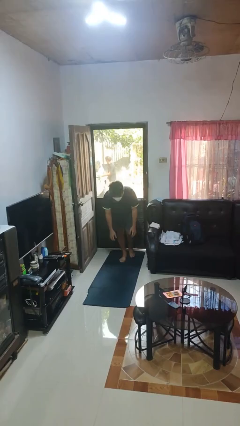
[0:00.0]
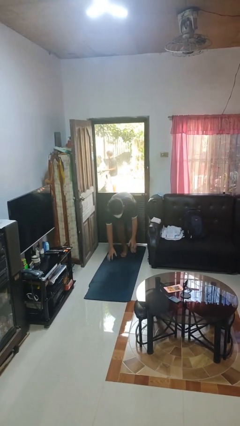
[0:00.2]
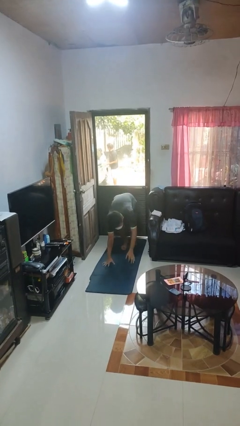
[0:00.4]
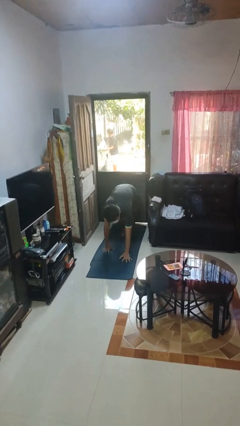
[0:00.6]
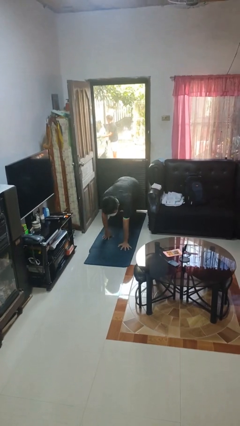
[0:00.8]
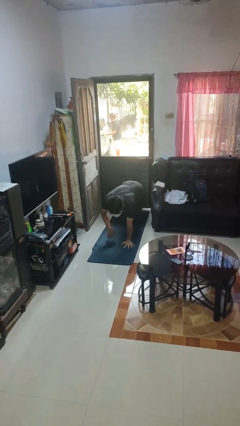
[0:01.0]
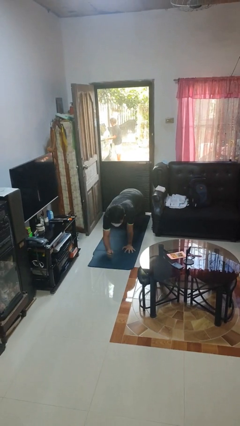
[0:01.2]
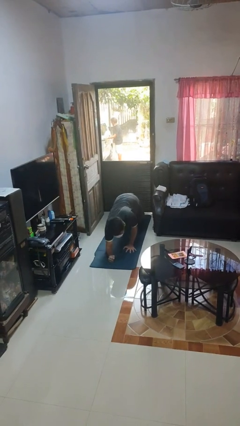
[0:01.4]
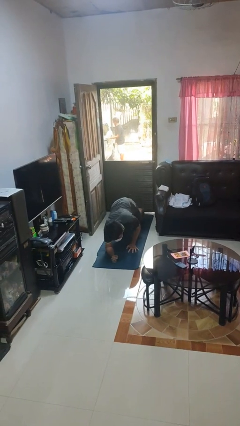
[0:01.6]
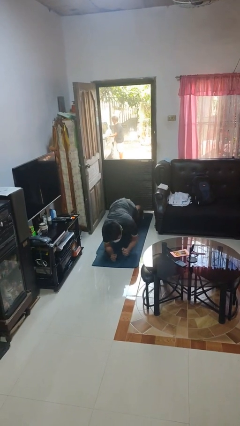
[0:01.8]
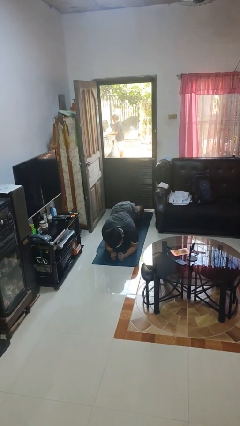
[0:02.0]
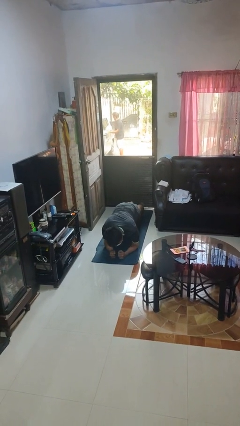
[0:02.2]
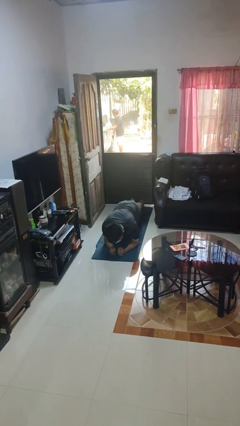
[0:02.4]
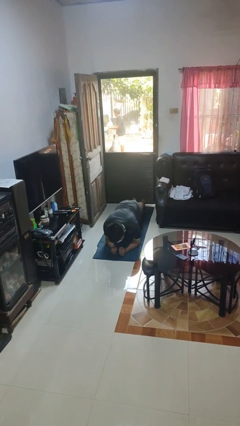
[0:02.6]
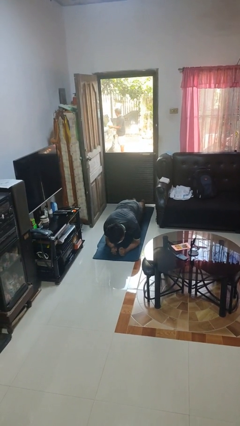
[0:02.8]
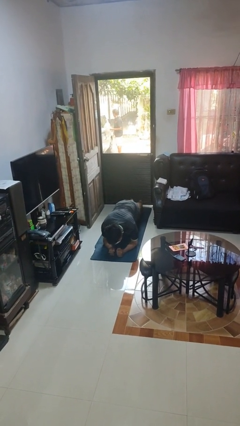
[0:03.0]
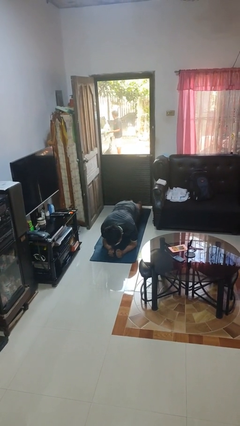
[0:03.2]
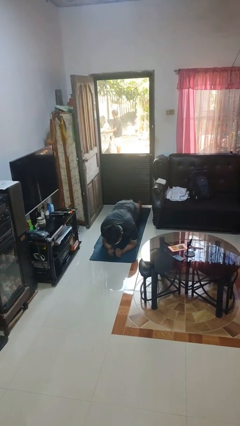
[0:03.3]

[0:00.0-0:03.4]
person exercises with plank

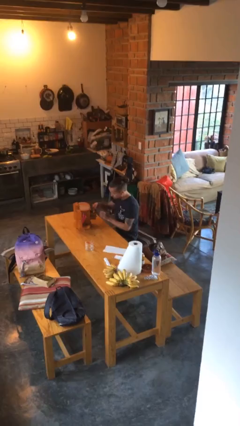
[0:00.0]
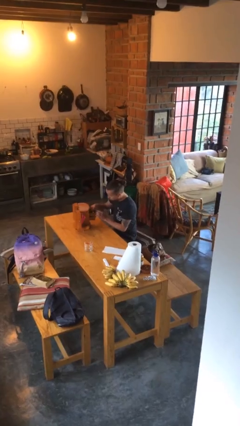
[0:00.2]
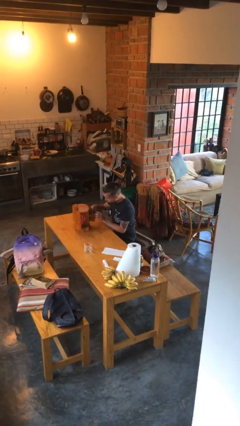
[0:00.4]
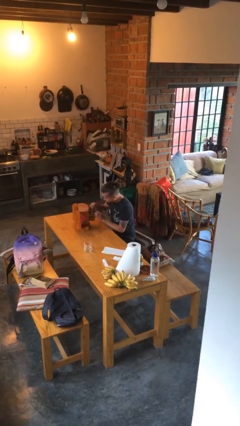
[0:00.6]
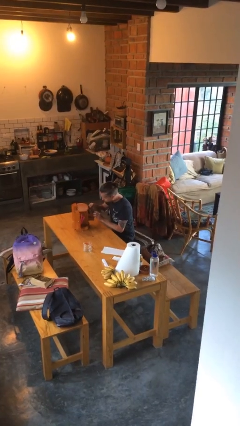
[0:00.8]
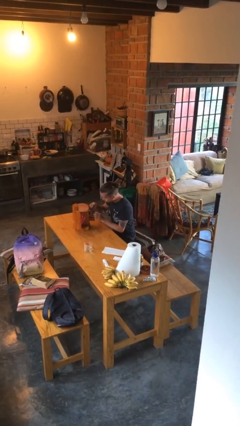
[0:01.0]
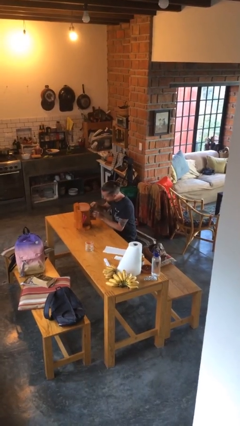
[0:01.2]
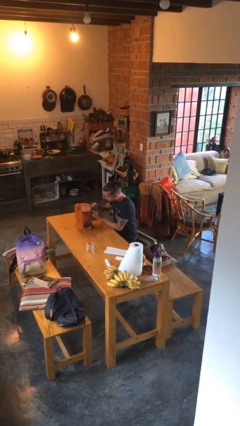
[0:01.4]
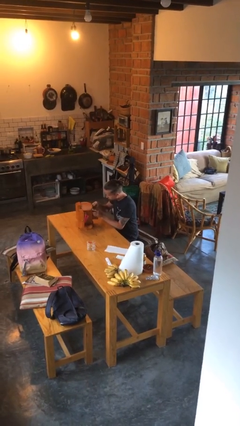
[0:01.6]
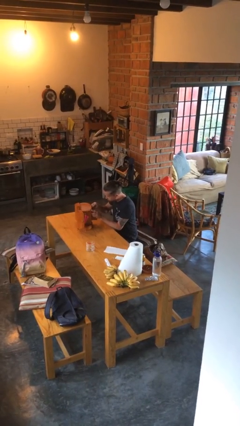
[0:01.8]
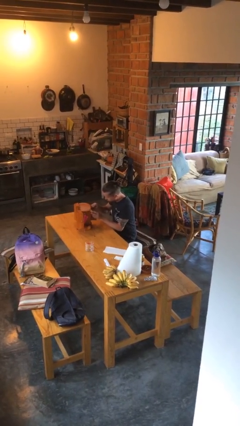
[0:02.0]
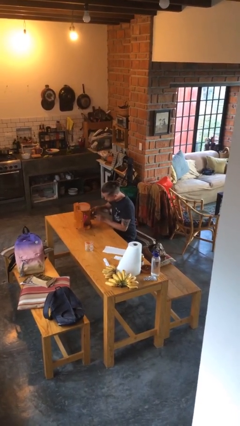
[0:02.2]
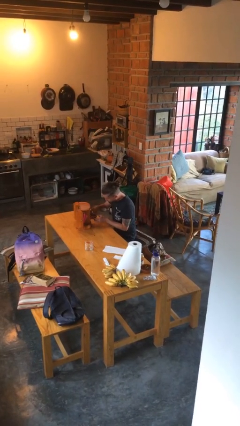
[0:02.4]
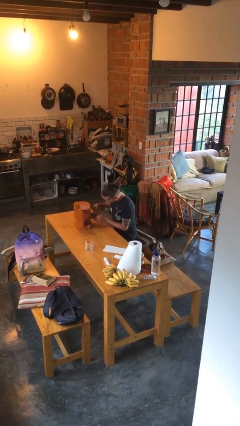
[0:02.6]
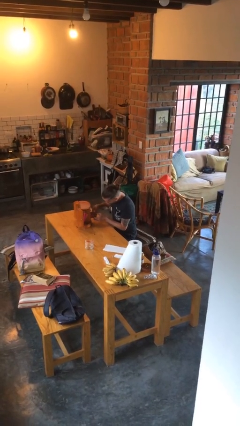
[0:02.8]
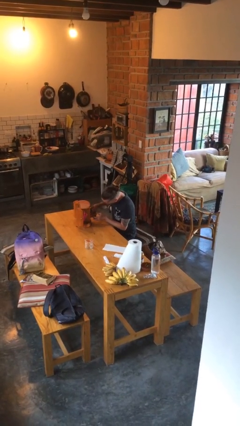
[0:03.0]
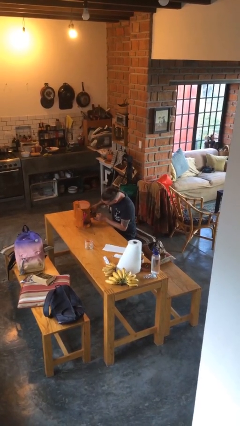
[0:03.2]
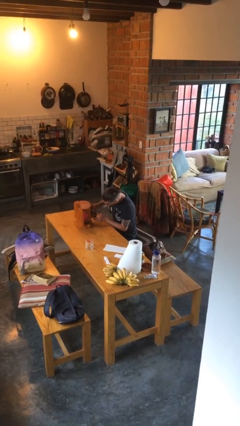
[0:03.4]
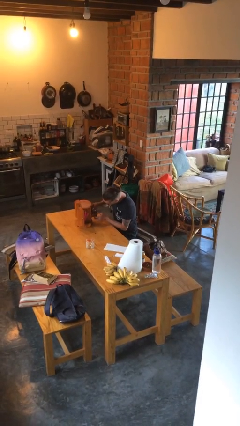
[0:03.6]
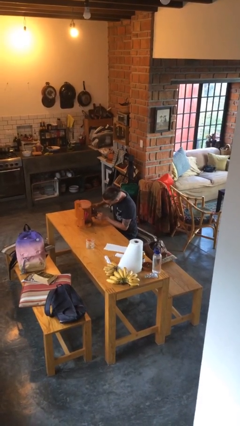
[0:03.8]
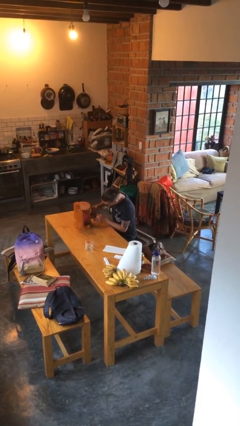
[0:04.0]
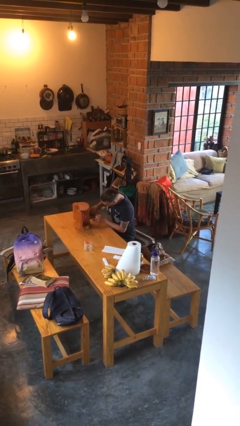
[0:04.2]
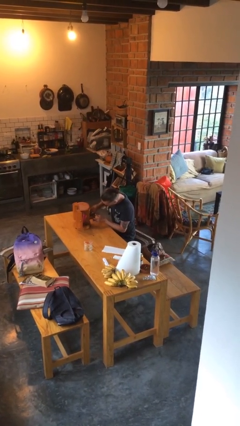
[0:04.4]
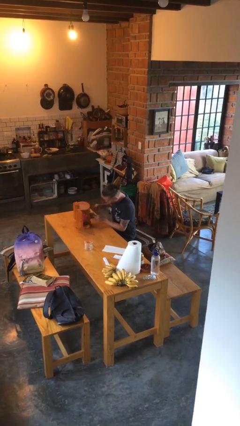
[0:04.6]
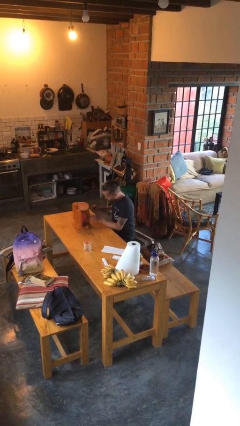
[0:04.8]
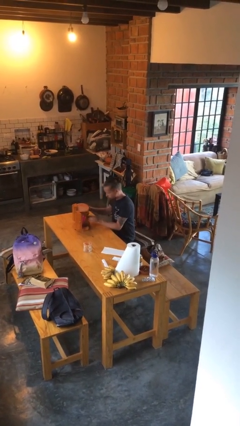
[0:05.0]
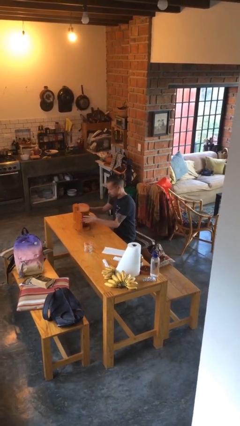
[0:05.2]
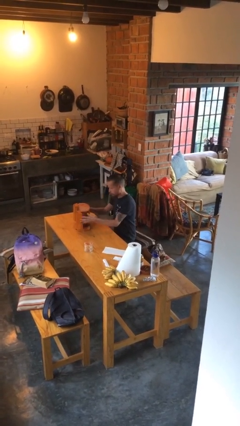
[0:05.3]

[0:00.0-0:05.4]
person searches jewelry box

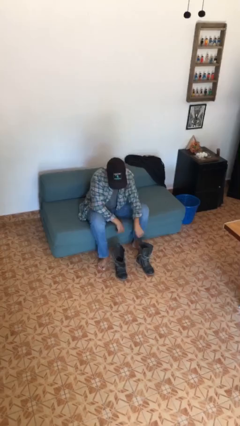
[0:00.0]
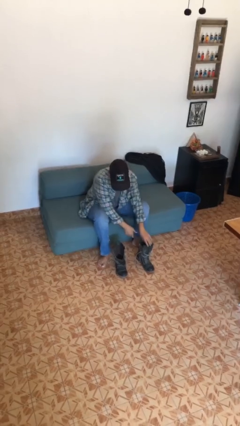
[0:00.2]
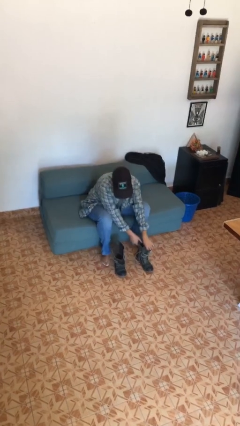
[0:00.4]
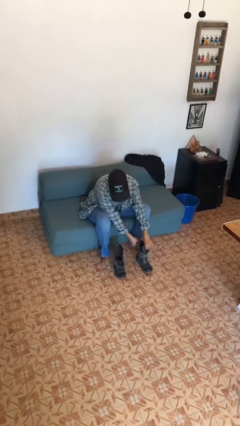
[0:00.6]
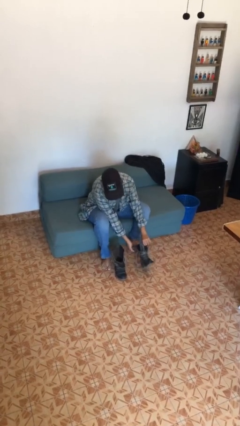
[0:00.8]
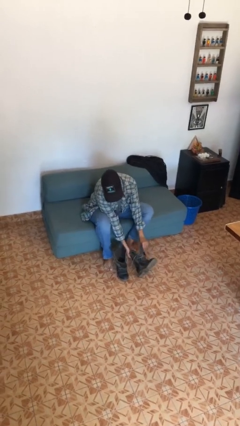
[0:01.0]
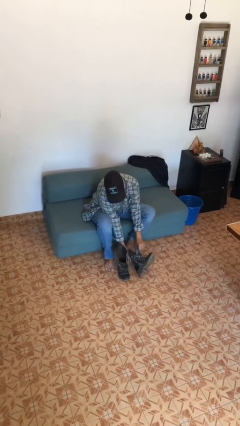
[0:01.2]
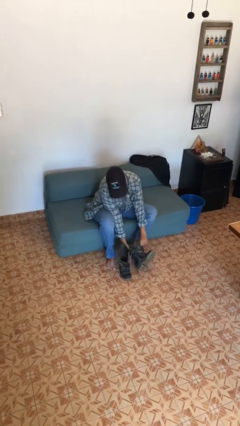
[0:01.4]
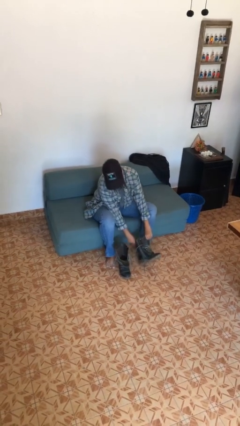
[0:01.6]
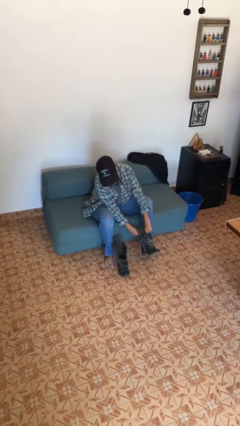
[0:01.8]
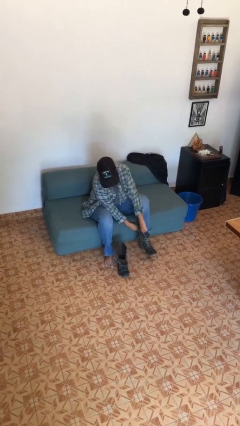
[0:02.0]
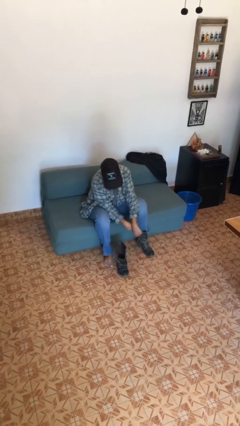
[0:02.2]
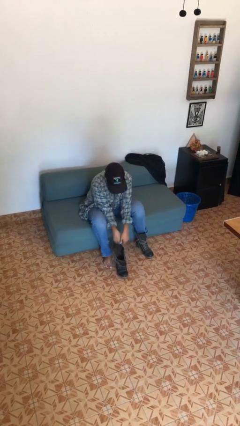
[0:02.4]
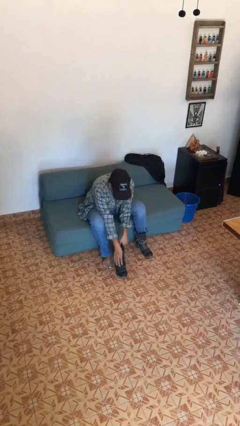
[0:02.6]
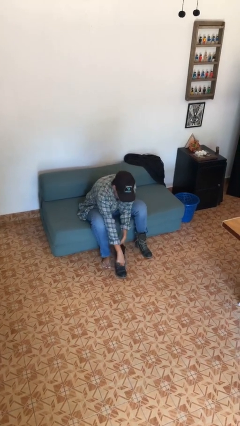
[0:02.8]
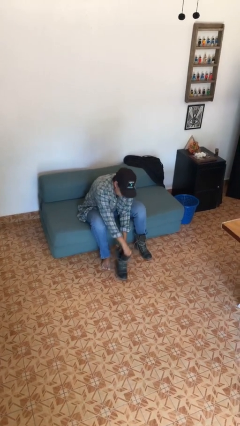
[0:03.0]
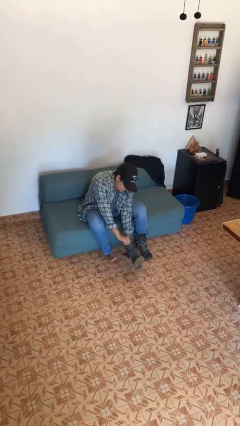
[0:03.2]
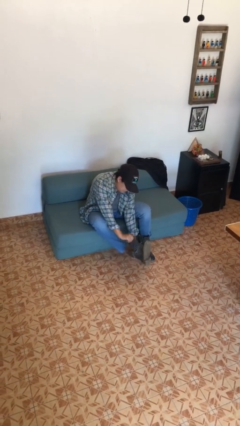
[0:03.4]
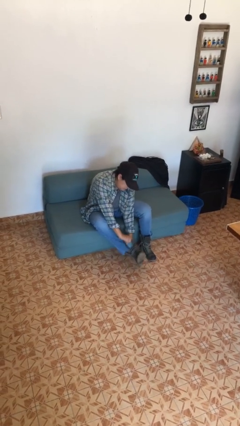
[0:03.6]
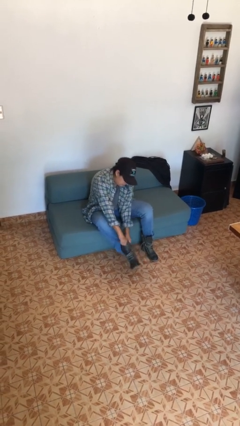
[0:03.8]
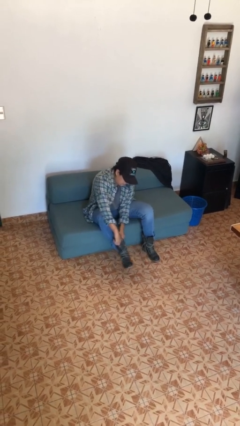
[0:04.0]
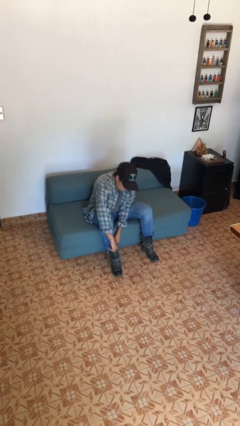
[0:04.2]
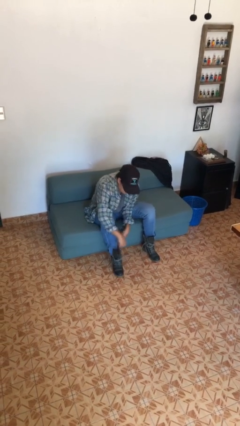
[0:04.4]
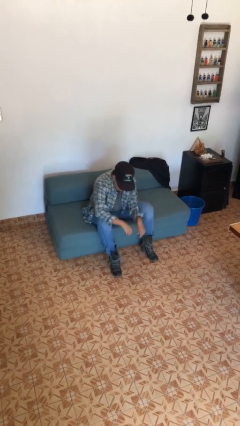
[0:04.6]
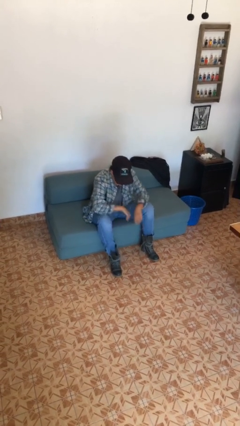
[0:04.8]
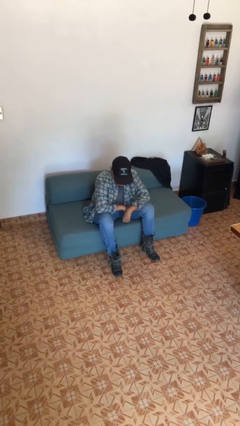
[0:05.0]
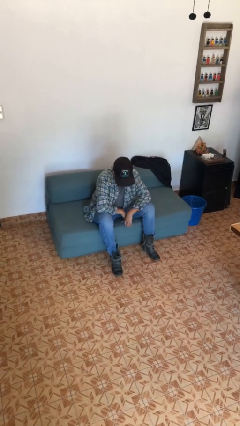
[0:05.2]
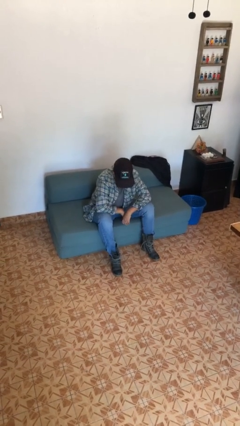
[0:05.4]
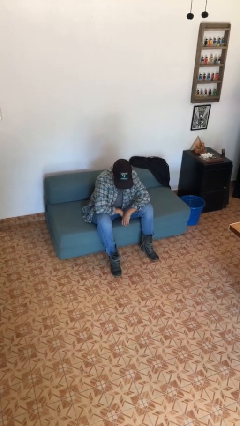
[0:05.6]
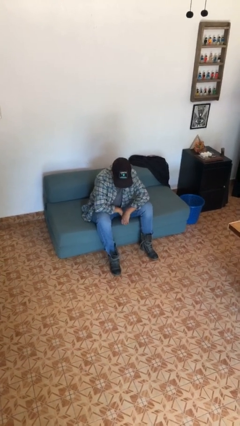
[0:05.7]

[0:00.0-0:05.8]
person puts on boots

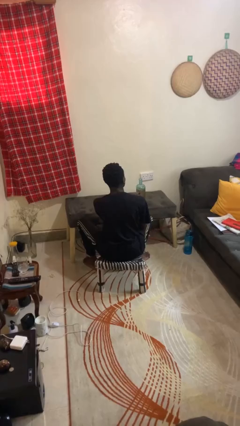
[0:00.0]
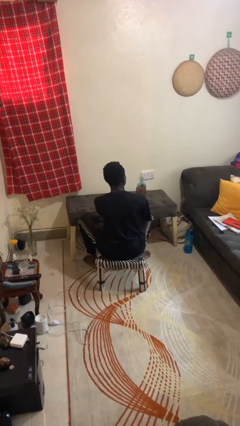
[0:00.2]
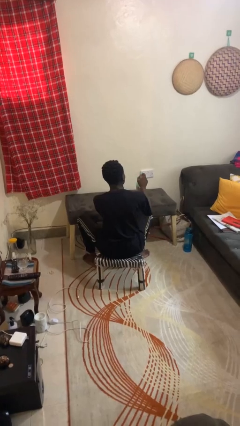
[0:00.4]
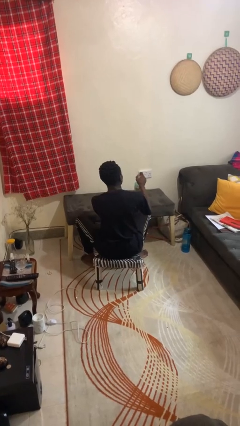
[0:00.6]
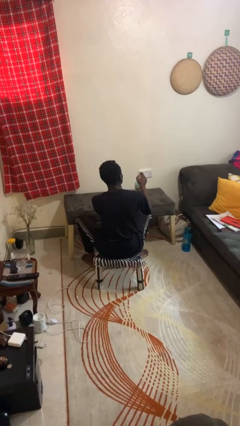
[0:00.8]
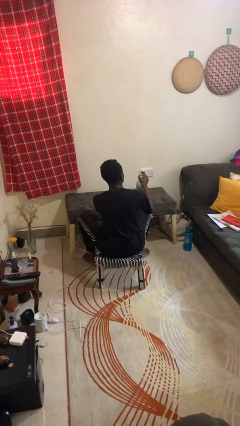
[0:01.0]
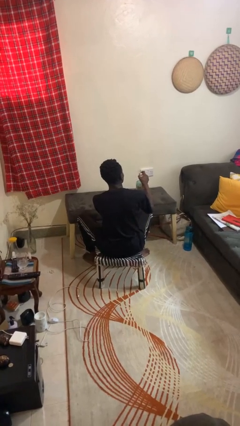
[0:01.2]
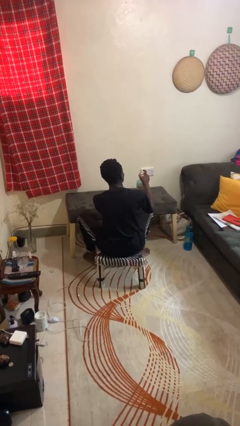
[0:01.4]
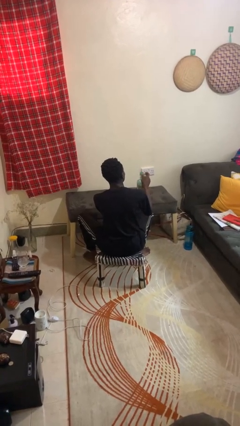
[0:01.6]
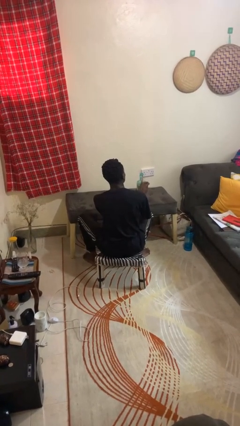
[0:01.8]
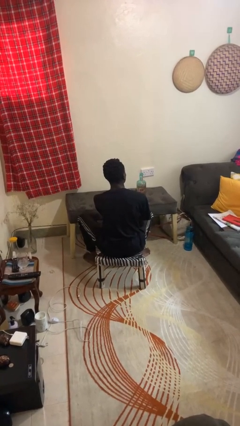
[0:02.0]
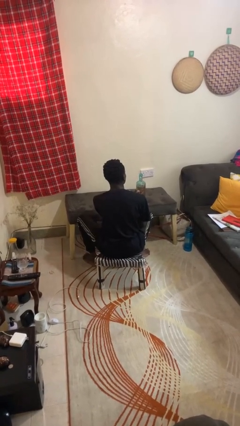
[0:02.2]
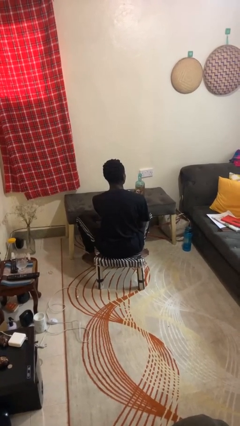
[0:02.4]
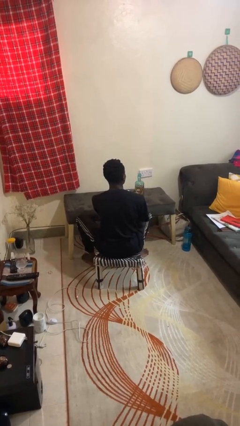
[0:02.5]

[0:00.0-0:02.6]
person closes jar

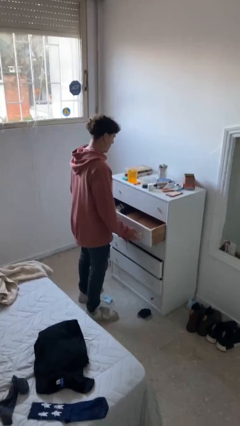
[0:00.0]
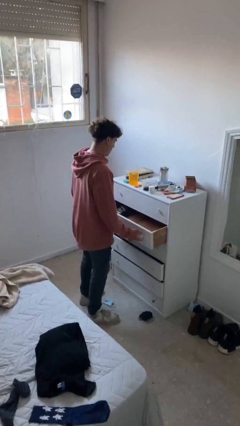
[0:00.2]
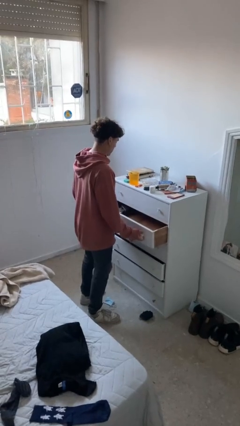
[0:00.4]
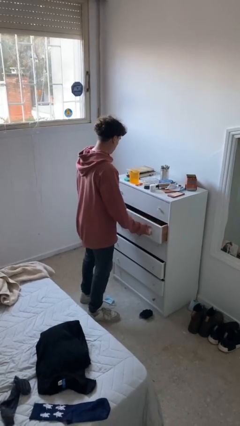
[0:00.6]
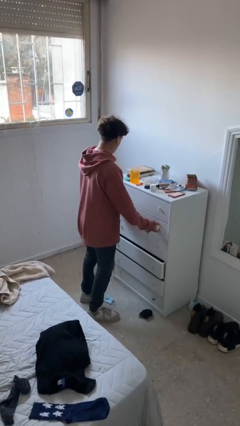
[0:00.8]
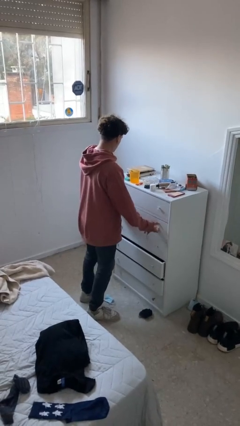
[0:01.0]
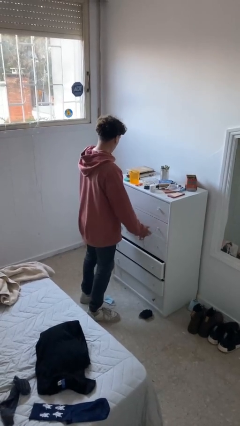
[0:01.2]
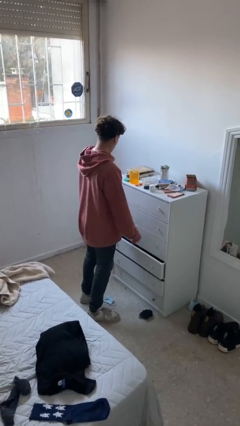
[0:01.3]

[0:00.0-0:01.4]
person closes dresser drawer
